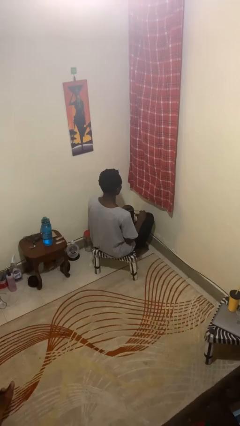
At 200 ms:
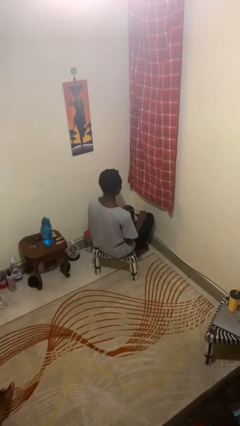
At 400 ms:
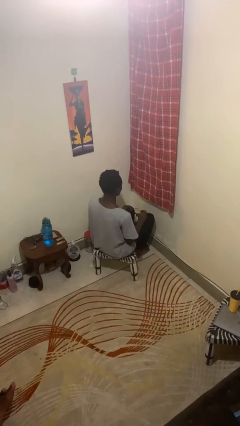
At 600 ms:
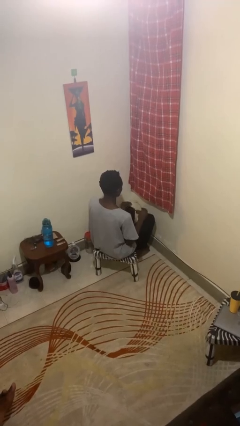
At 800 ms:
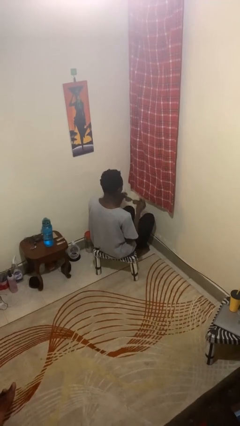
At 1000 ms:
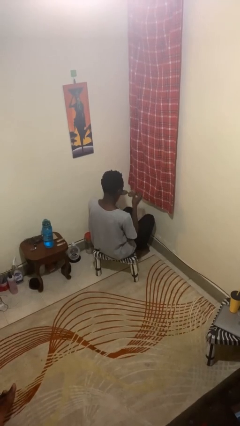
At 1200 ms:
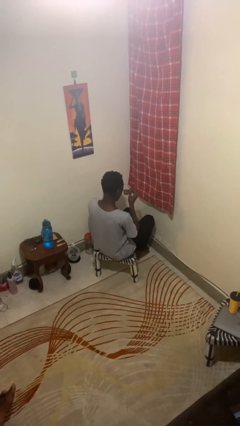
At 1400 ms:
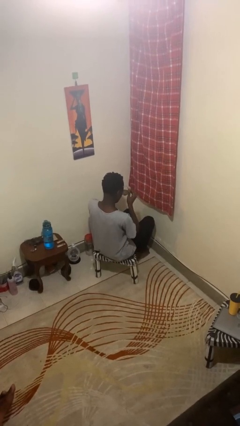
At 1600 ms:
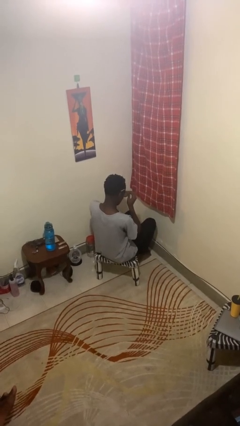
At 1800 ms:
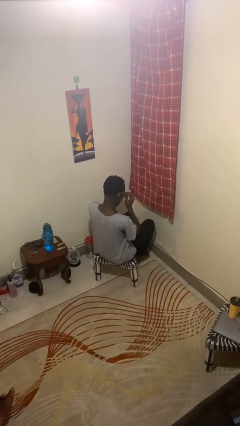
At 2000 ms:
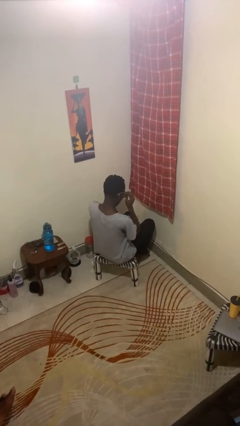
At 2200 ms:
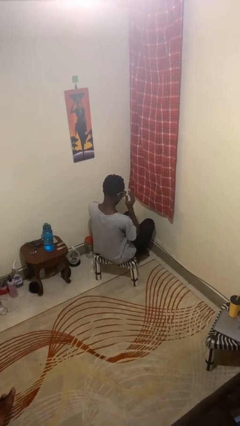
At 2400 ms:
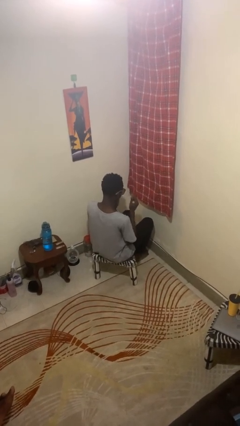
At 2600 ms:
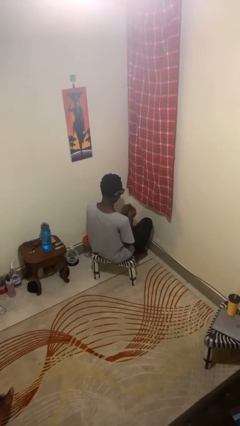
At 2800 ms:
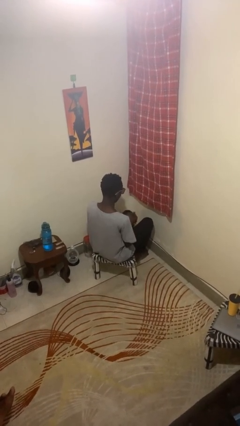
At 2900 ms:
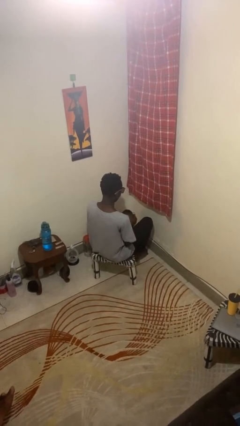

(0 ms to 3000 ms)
person puts on glasses

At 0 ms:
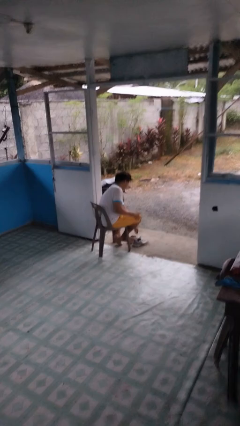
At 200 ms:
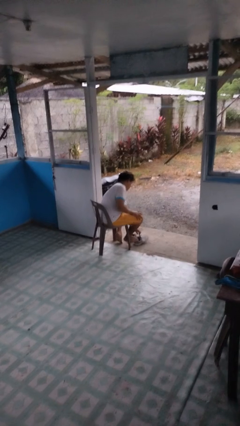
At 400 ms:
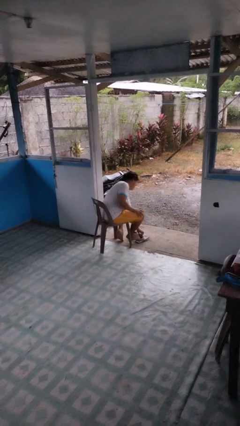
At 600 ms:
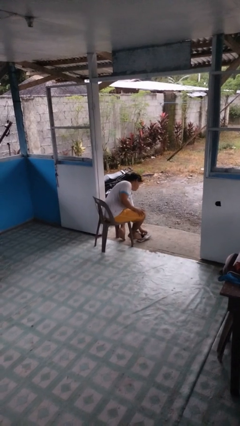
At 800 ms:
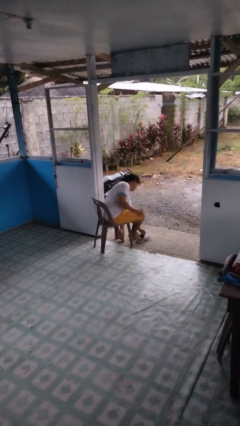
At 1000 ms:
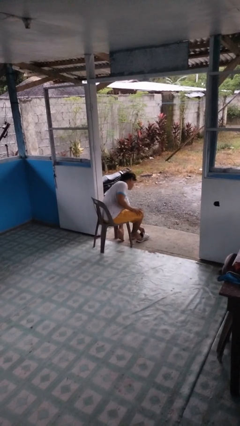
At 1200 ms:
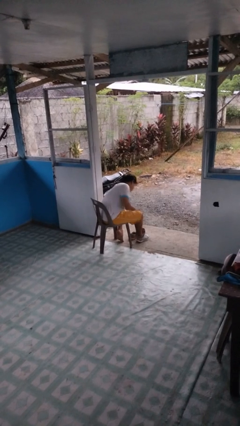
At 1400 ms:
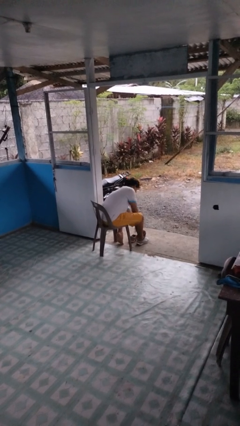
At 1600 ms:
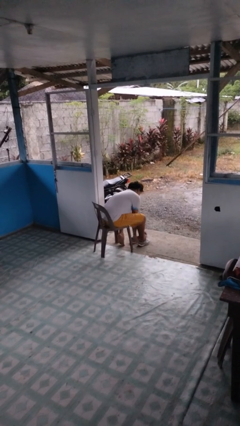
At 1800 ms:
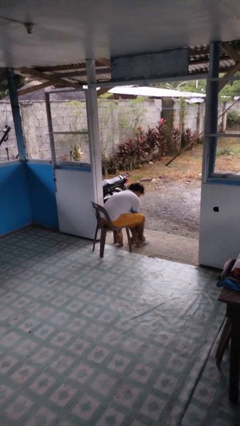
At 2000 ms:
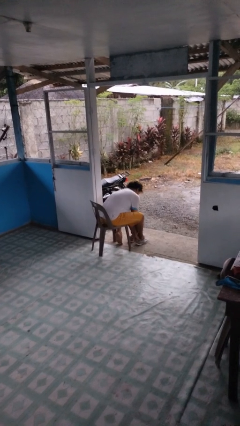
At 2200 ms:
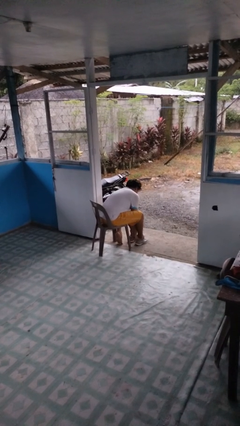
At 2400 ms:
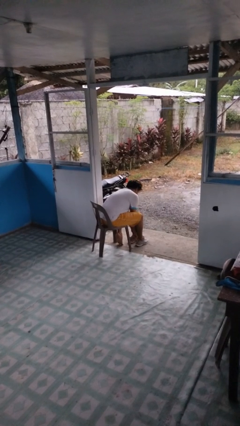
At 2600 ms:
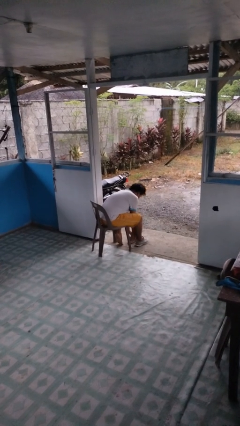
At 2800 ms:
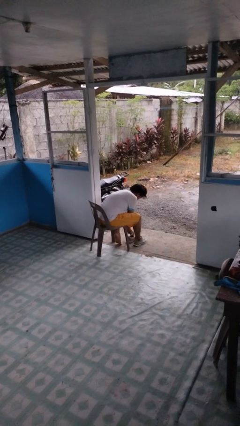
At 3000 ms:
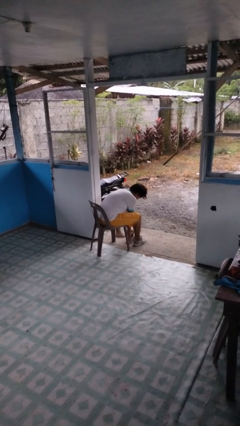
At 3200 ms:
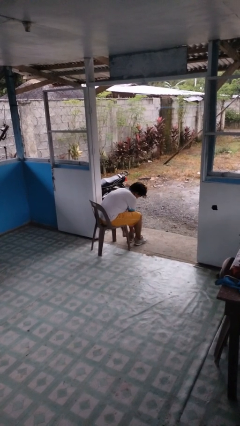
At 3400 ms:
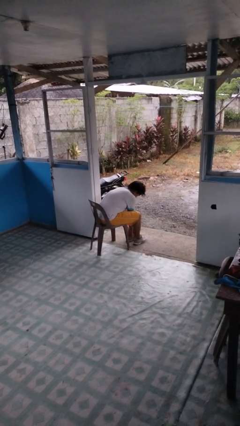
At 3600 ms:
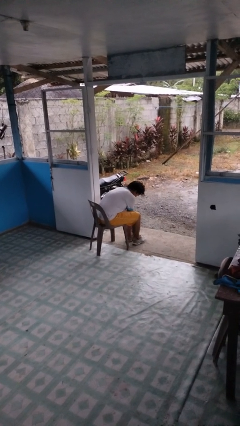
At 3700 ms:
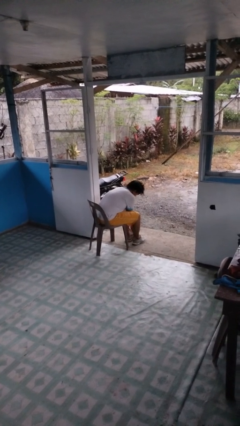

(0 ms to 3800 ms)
person puts on shoes

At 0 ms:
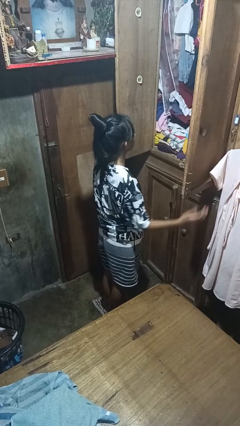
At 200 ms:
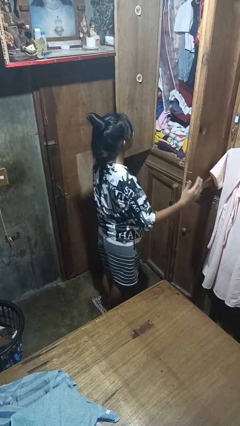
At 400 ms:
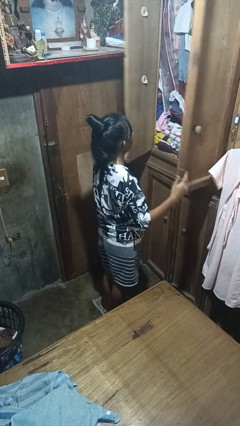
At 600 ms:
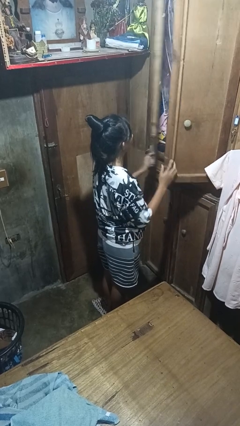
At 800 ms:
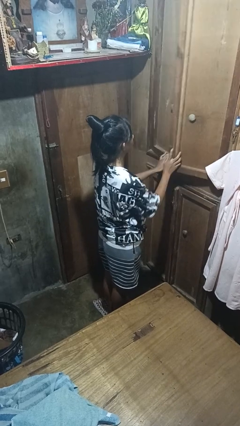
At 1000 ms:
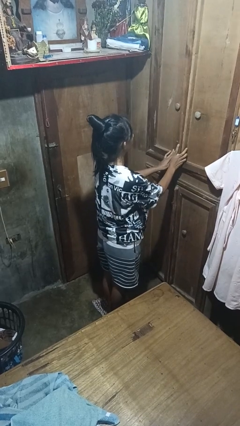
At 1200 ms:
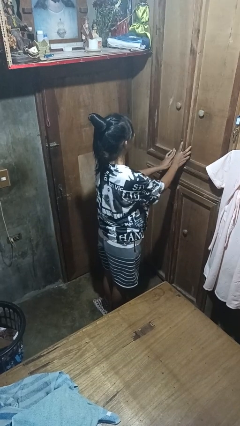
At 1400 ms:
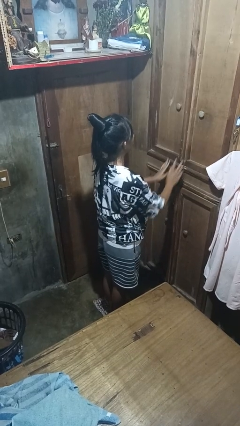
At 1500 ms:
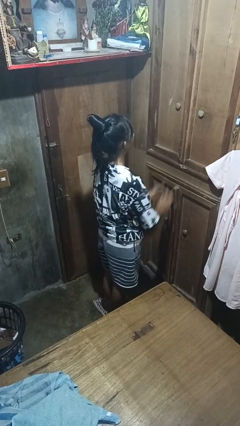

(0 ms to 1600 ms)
person closes closet door

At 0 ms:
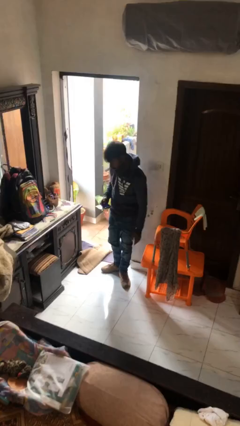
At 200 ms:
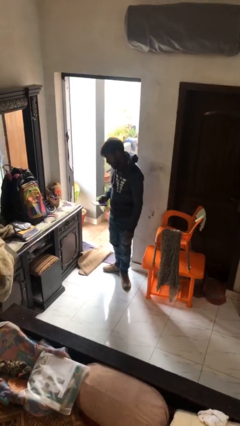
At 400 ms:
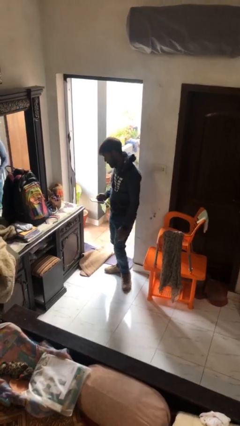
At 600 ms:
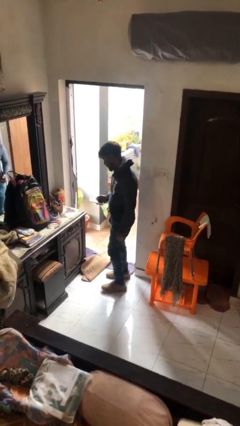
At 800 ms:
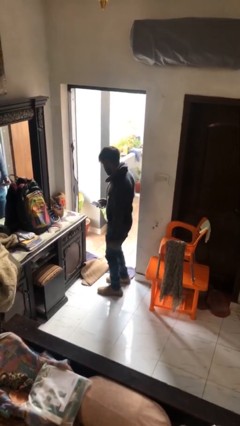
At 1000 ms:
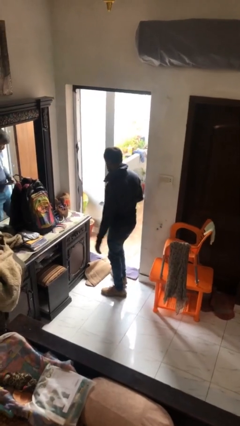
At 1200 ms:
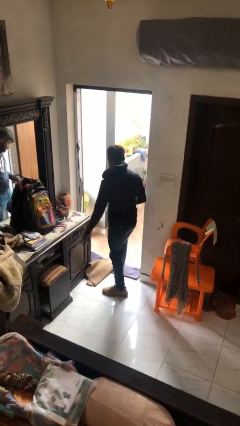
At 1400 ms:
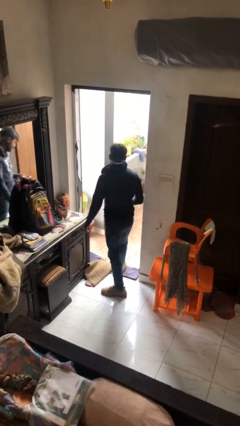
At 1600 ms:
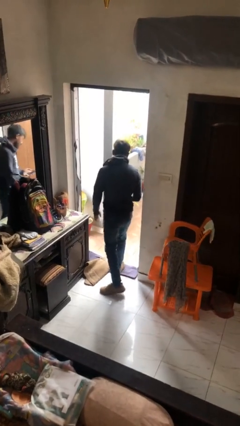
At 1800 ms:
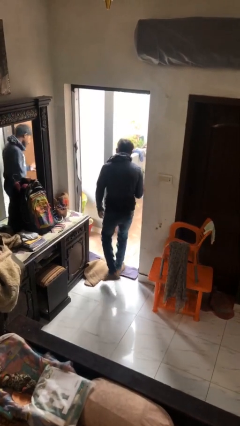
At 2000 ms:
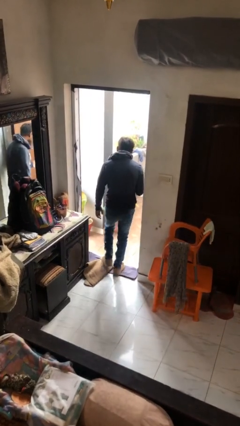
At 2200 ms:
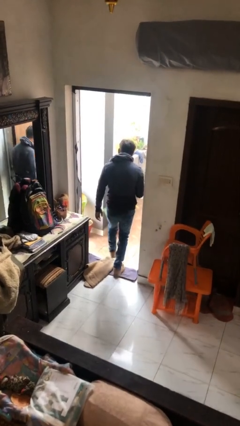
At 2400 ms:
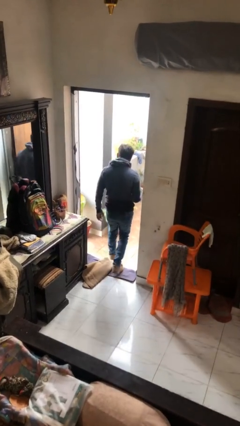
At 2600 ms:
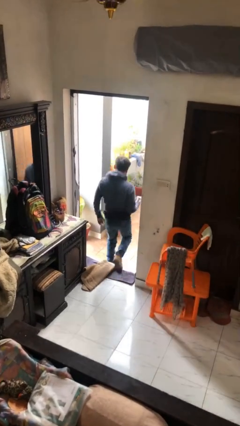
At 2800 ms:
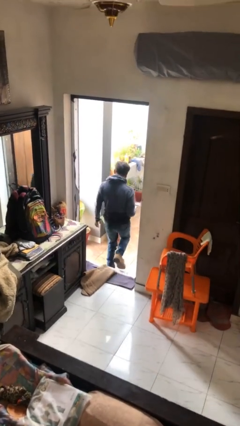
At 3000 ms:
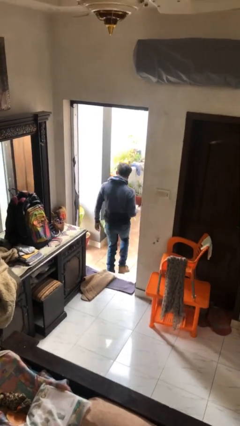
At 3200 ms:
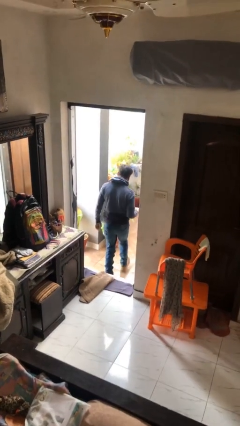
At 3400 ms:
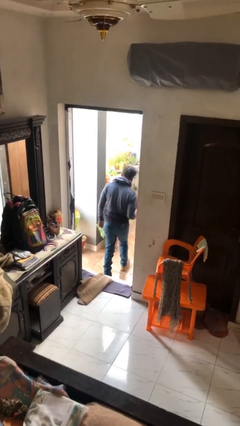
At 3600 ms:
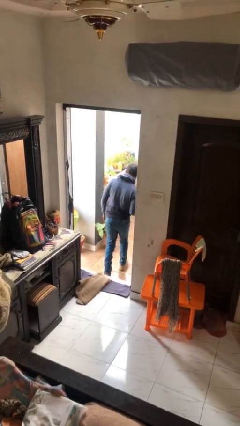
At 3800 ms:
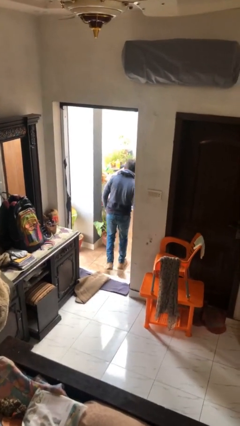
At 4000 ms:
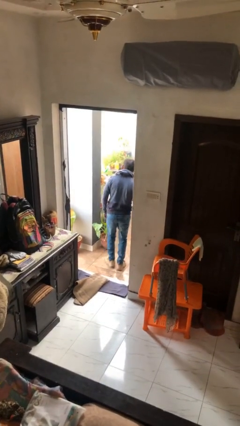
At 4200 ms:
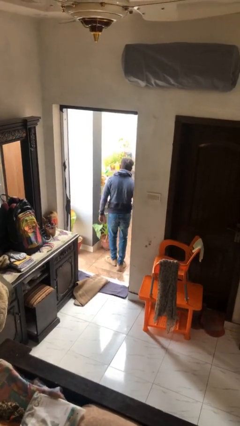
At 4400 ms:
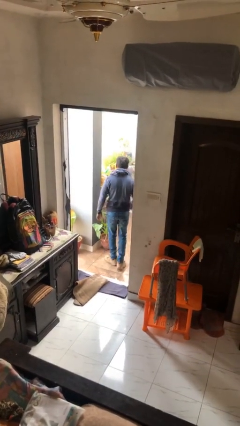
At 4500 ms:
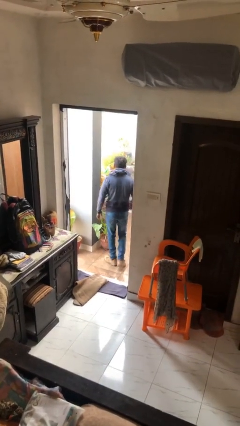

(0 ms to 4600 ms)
person exits scene through structure

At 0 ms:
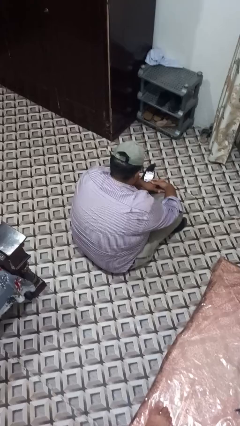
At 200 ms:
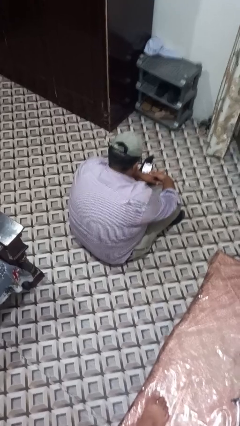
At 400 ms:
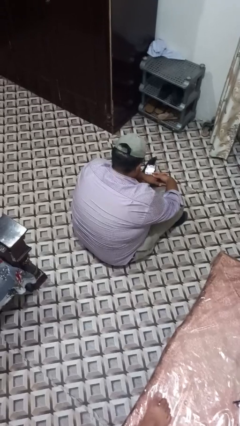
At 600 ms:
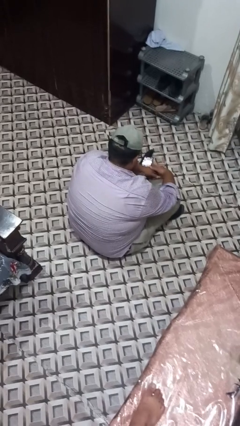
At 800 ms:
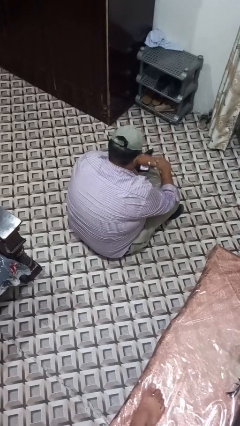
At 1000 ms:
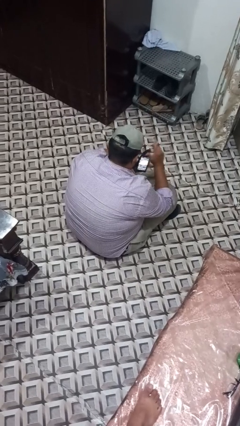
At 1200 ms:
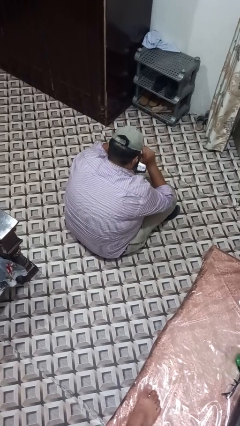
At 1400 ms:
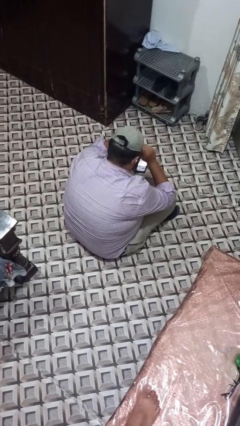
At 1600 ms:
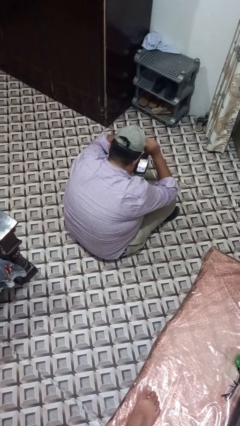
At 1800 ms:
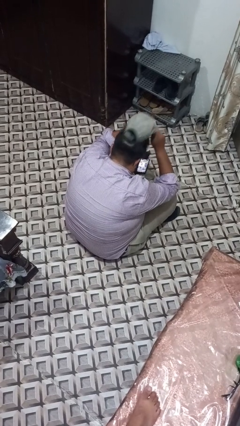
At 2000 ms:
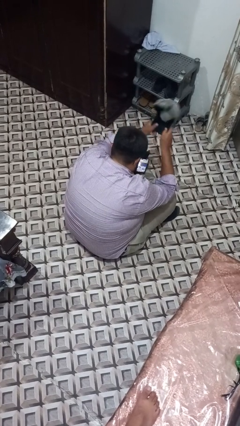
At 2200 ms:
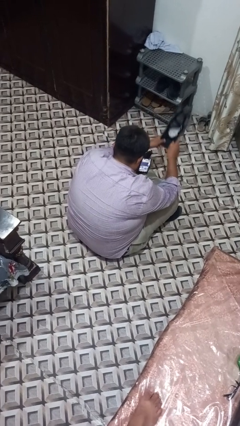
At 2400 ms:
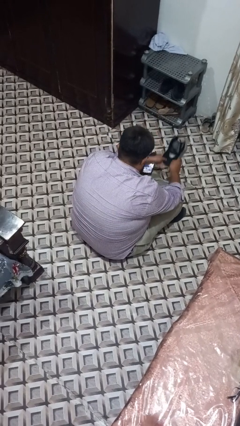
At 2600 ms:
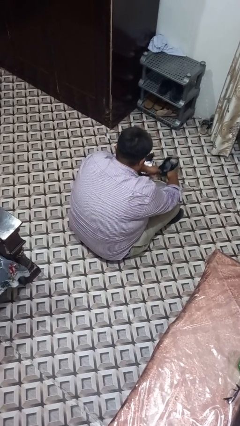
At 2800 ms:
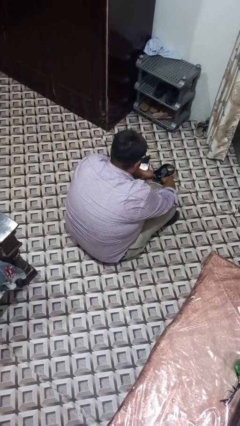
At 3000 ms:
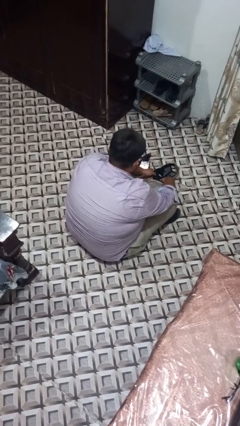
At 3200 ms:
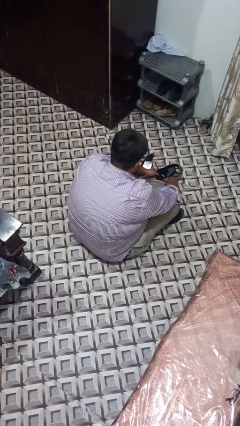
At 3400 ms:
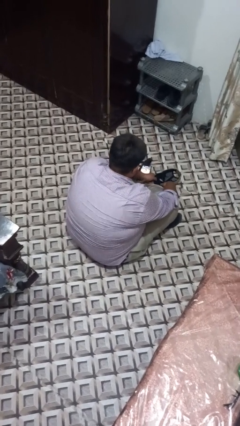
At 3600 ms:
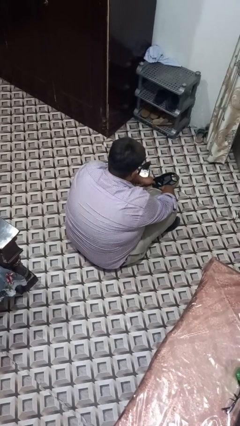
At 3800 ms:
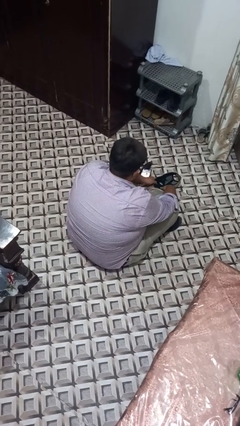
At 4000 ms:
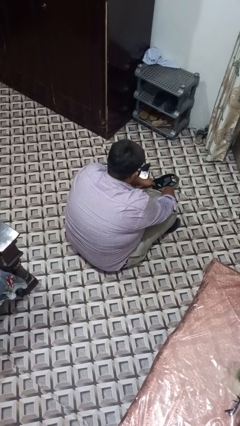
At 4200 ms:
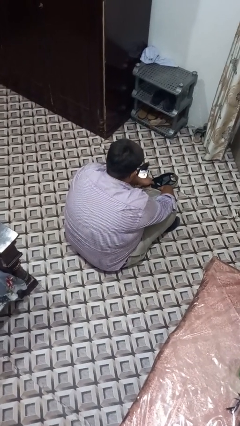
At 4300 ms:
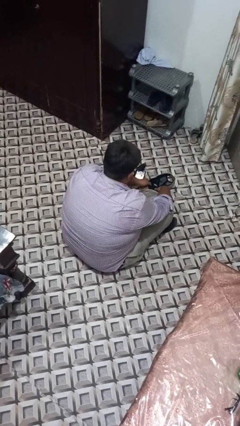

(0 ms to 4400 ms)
person takes off hat
